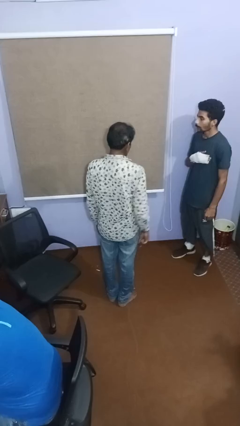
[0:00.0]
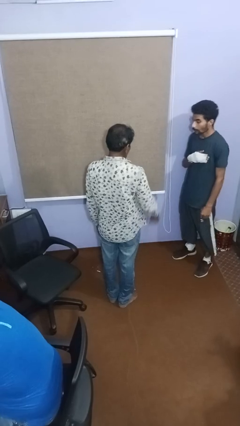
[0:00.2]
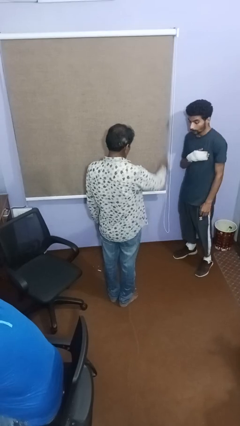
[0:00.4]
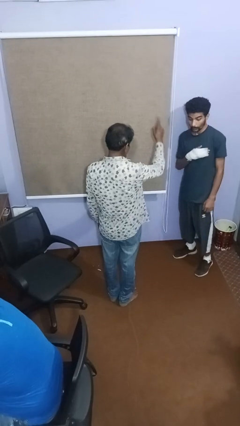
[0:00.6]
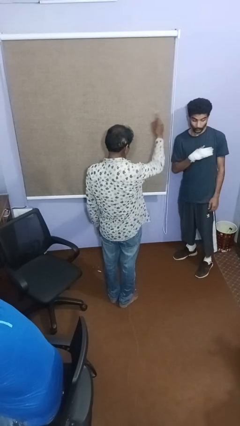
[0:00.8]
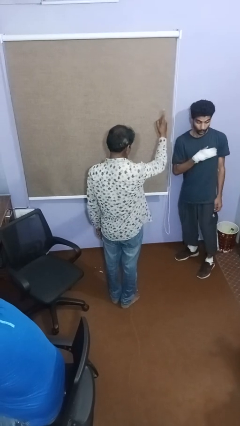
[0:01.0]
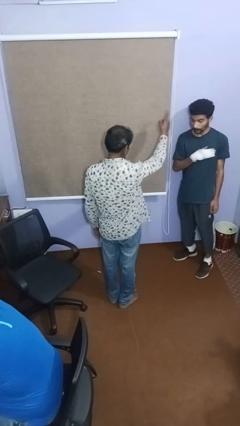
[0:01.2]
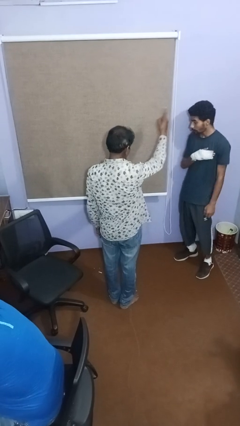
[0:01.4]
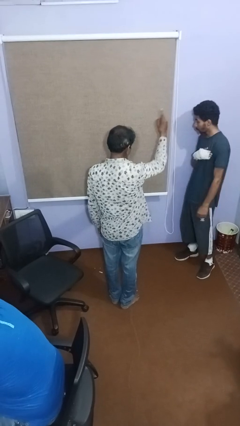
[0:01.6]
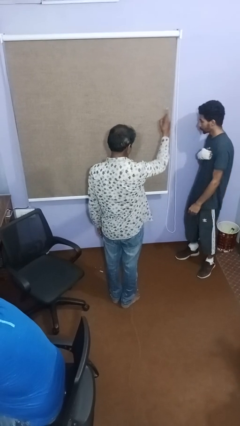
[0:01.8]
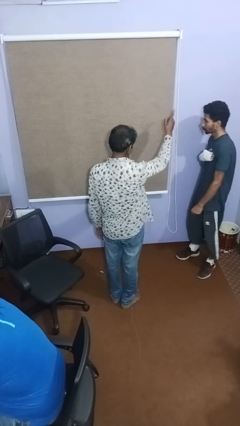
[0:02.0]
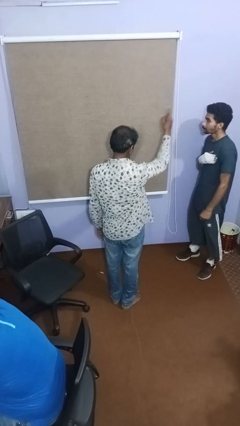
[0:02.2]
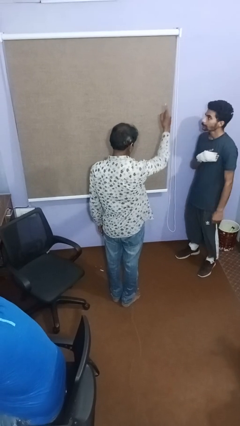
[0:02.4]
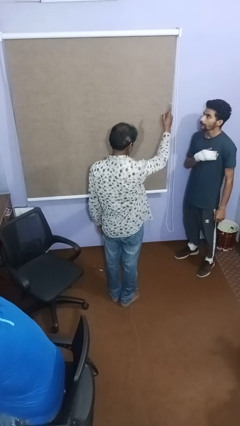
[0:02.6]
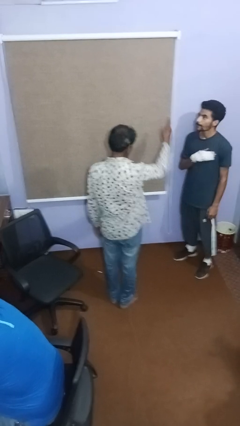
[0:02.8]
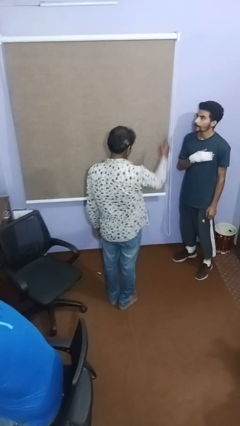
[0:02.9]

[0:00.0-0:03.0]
person points at person

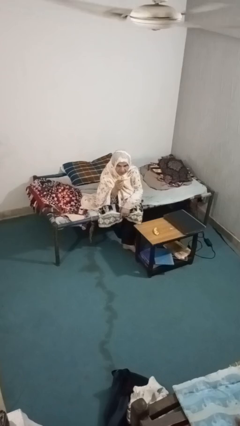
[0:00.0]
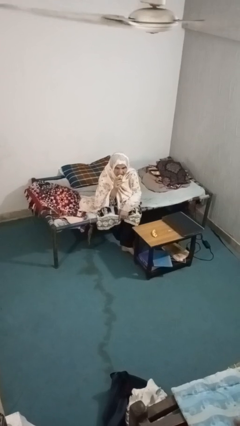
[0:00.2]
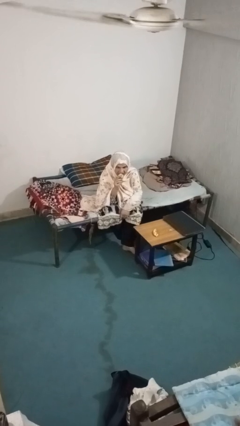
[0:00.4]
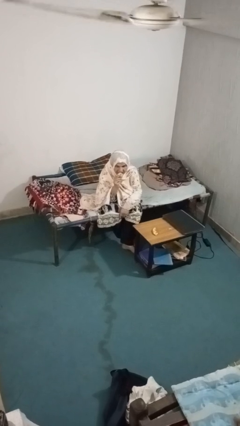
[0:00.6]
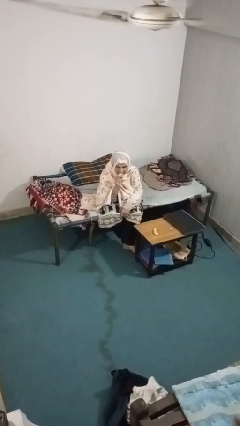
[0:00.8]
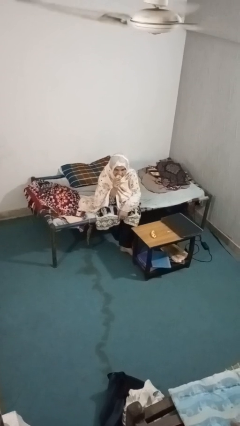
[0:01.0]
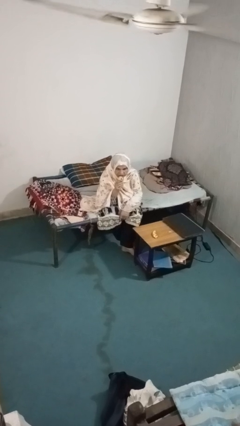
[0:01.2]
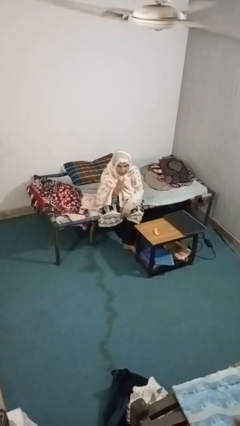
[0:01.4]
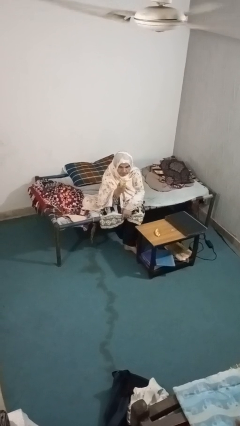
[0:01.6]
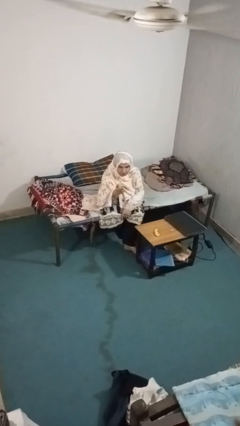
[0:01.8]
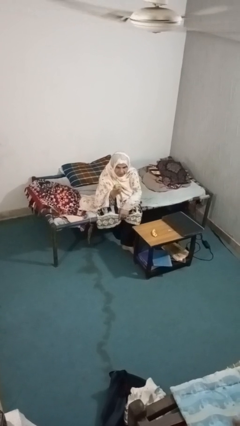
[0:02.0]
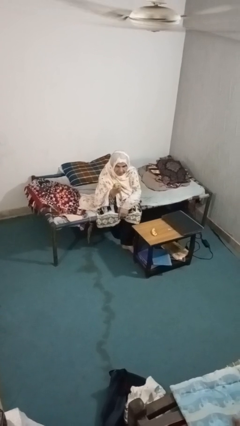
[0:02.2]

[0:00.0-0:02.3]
person eats apple

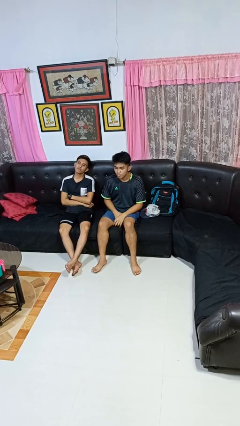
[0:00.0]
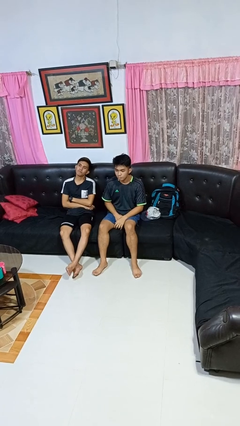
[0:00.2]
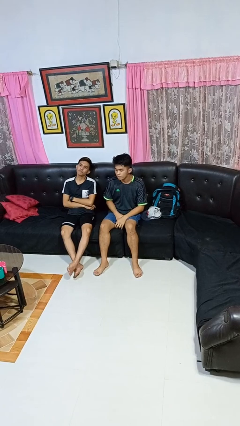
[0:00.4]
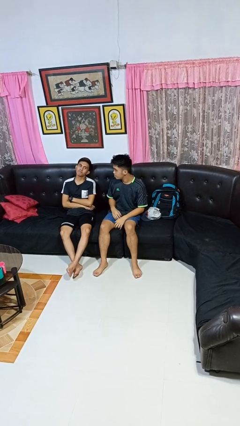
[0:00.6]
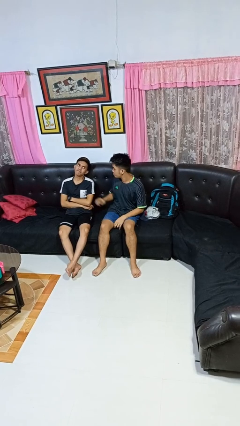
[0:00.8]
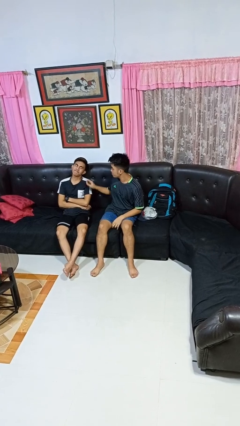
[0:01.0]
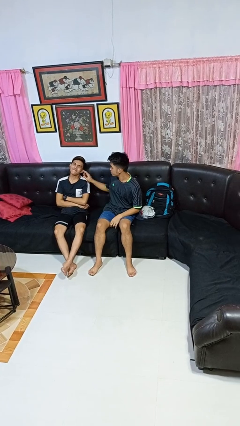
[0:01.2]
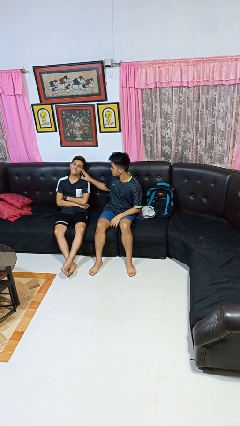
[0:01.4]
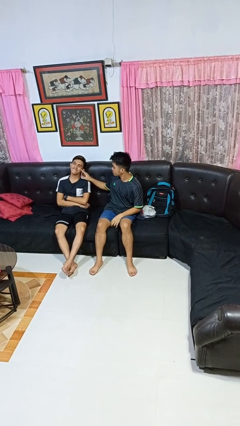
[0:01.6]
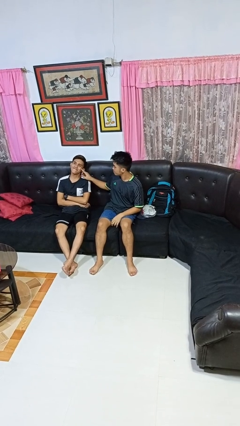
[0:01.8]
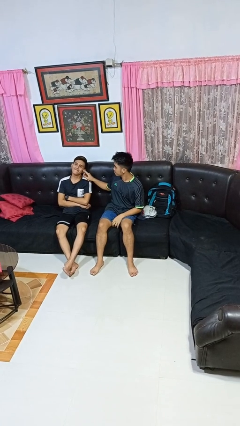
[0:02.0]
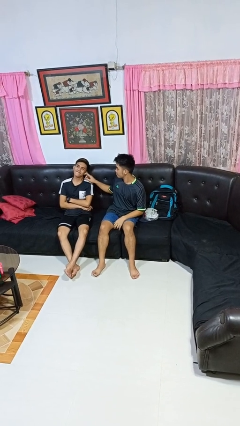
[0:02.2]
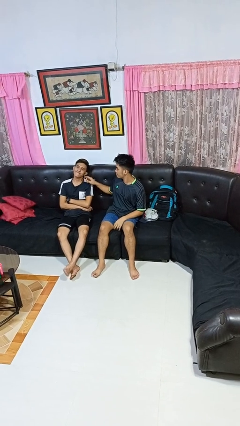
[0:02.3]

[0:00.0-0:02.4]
person touches face of person

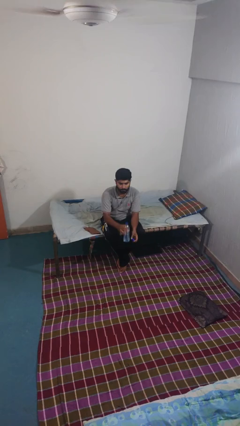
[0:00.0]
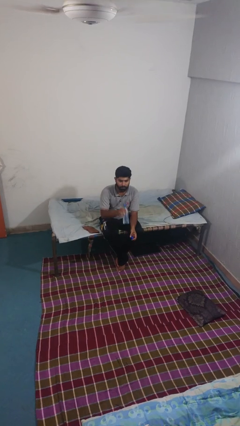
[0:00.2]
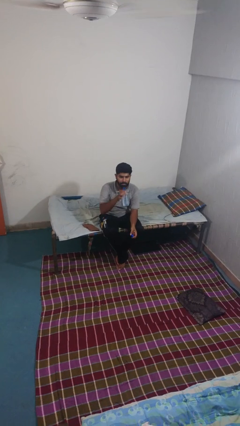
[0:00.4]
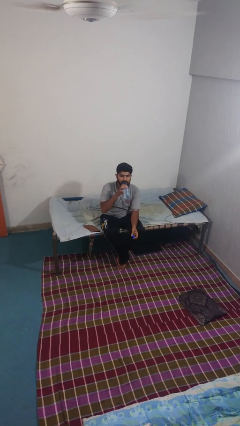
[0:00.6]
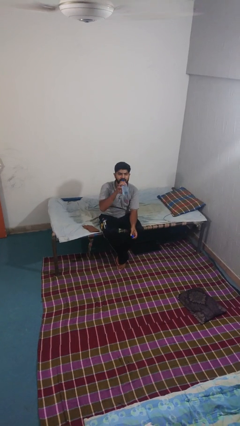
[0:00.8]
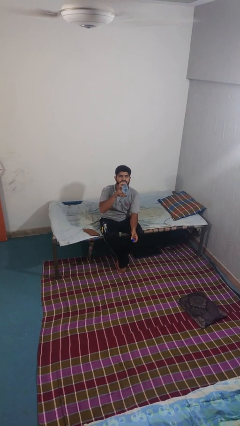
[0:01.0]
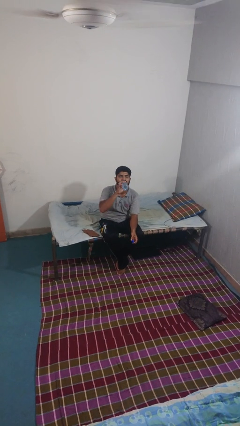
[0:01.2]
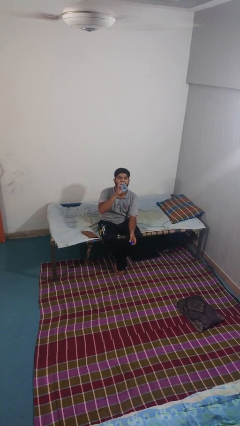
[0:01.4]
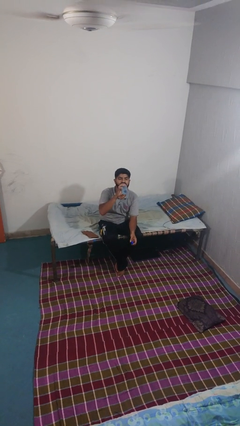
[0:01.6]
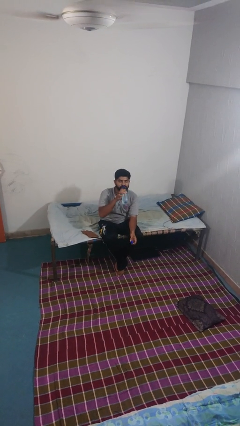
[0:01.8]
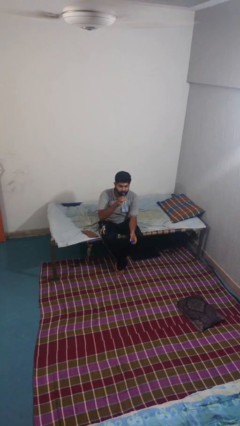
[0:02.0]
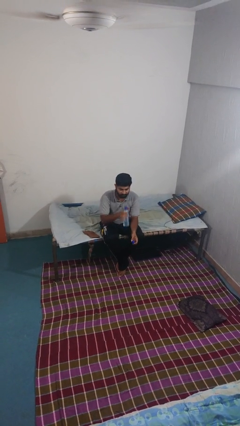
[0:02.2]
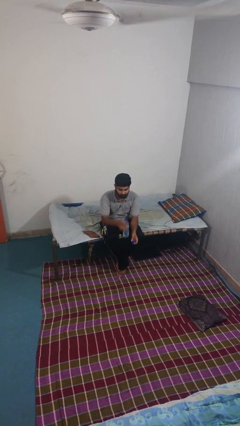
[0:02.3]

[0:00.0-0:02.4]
person drinks from bottle

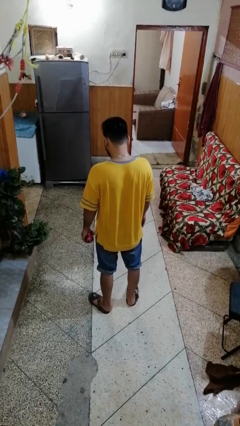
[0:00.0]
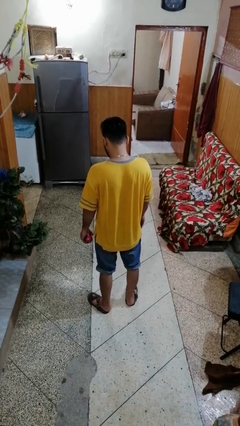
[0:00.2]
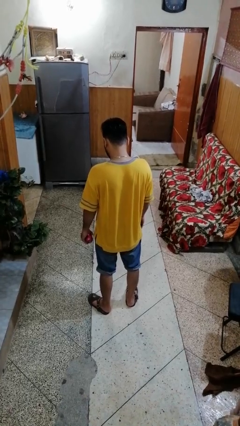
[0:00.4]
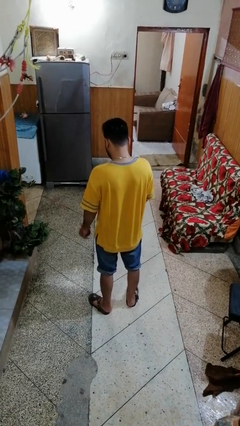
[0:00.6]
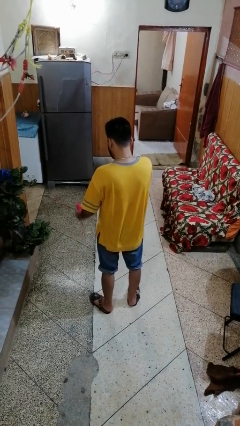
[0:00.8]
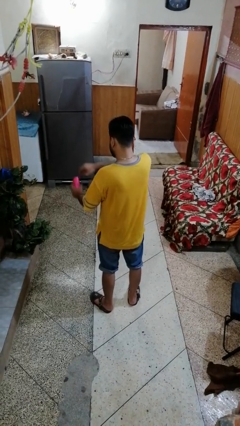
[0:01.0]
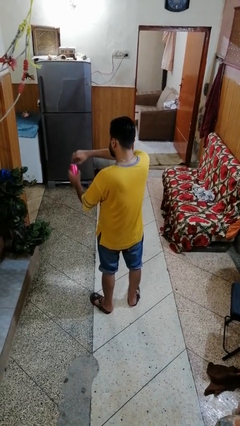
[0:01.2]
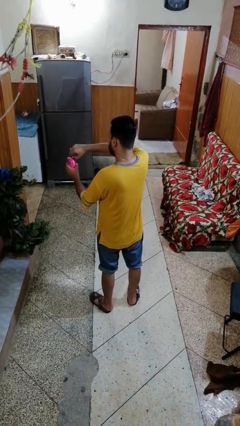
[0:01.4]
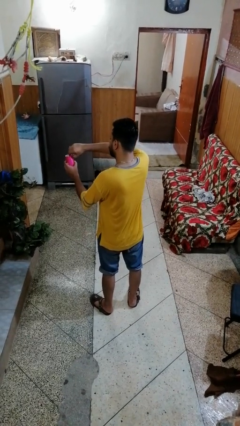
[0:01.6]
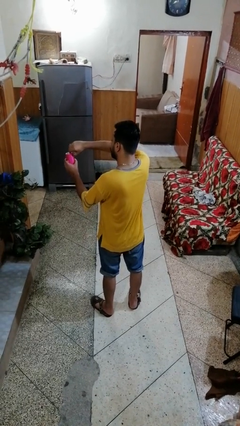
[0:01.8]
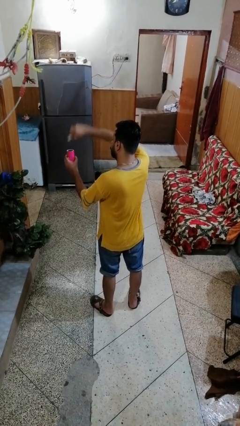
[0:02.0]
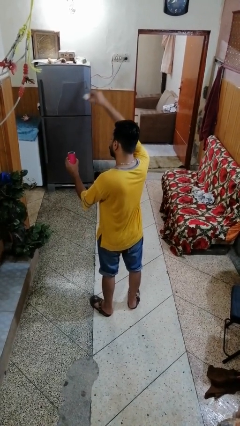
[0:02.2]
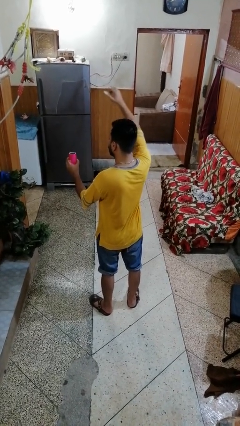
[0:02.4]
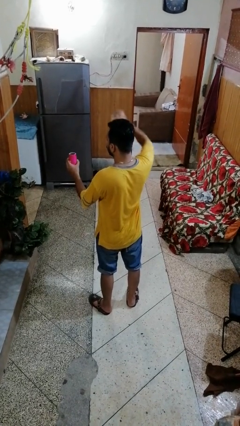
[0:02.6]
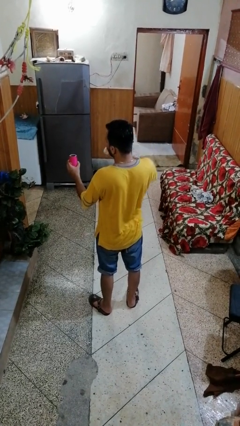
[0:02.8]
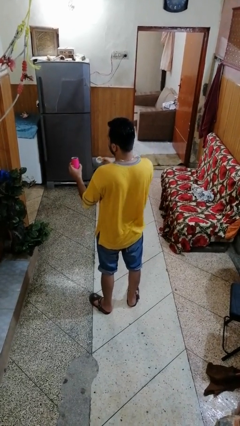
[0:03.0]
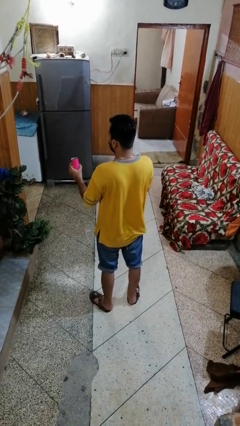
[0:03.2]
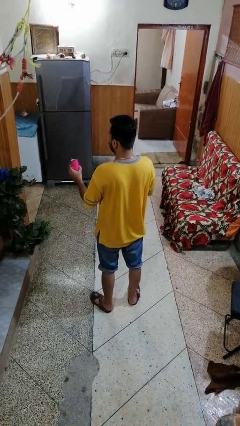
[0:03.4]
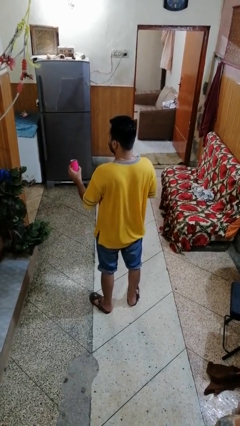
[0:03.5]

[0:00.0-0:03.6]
person opens beverage can

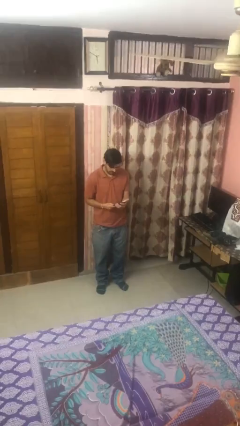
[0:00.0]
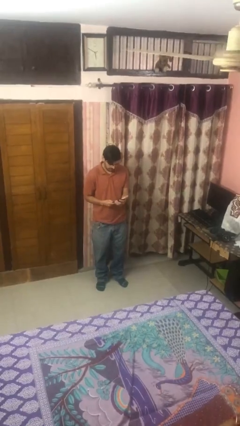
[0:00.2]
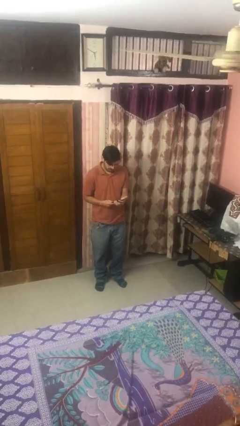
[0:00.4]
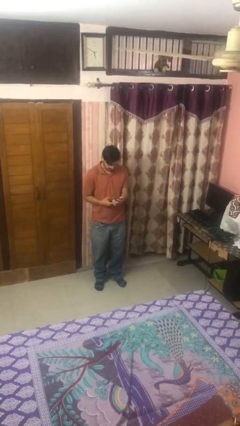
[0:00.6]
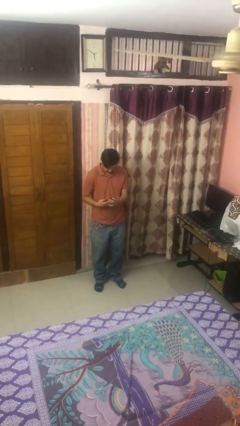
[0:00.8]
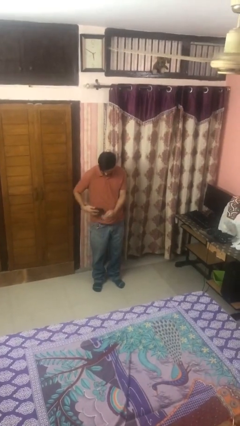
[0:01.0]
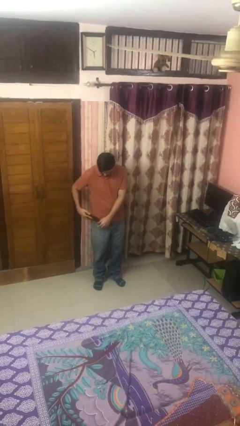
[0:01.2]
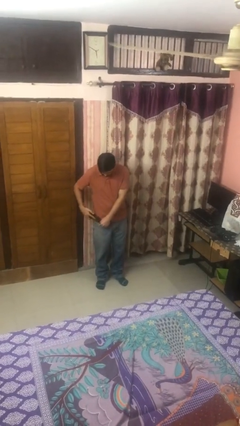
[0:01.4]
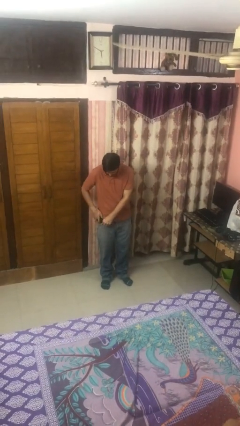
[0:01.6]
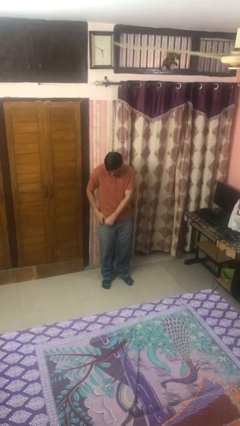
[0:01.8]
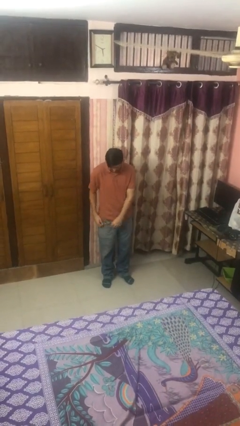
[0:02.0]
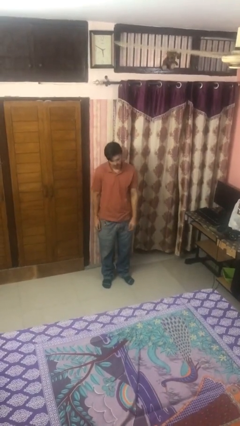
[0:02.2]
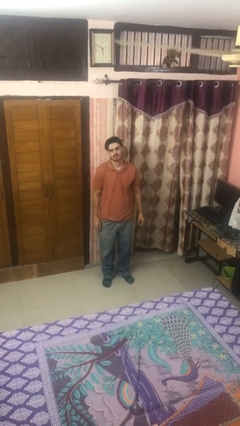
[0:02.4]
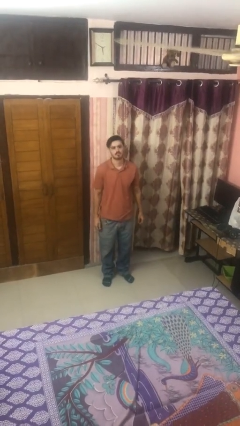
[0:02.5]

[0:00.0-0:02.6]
person puts phone into pocket

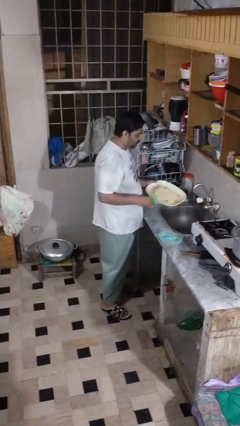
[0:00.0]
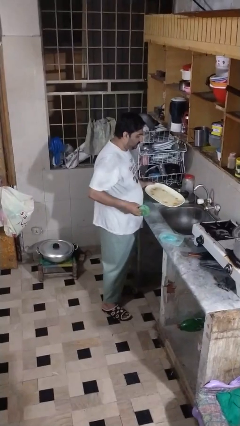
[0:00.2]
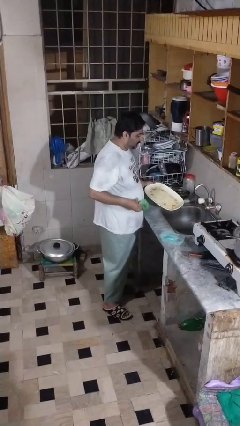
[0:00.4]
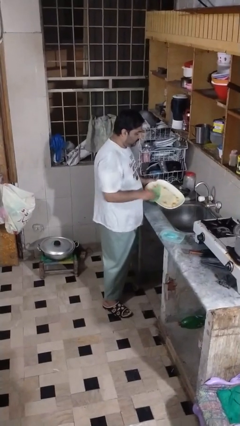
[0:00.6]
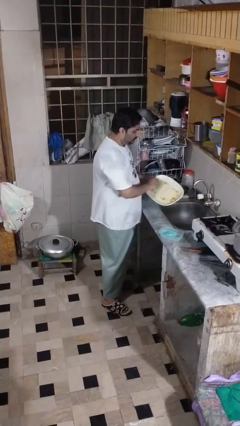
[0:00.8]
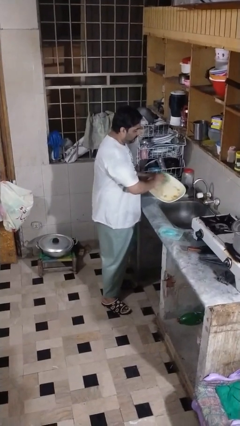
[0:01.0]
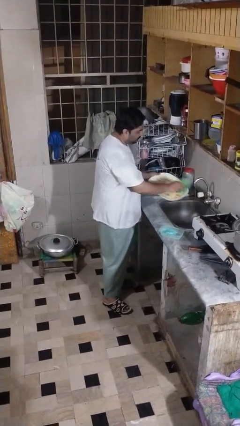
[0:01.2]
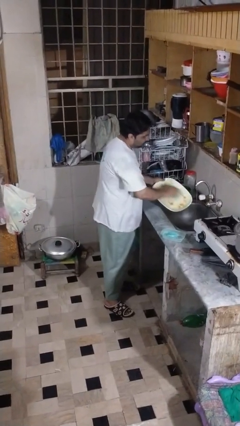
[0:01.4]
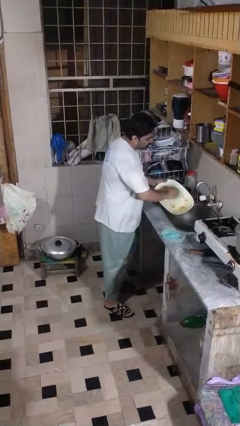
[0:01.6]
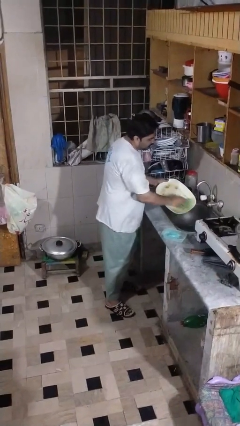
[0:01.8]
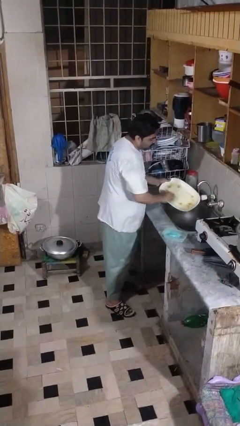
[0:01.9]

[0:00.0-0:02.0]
person washes dish
